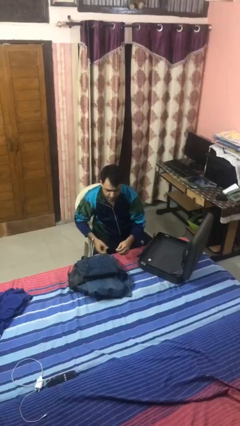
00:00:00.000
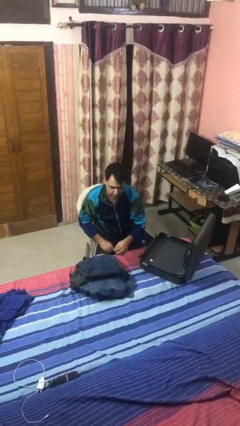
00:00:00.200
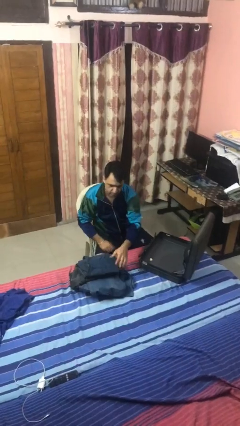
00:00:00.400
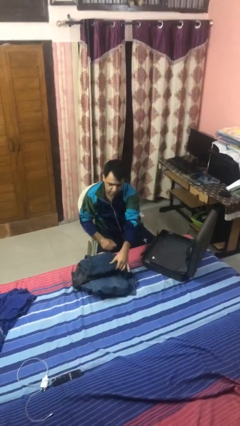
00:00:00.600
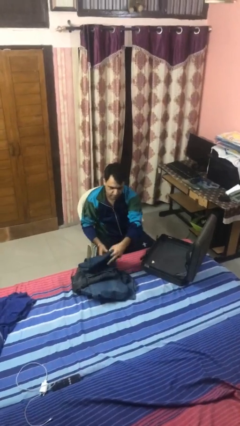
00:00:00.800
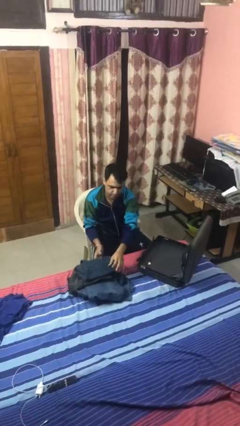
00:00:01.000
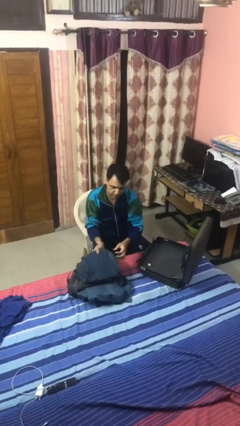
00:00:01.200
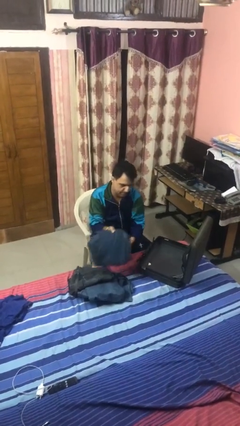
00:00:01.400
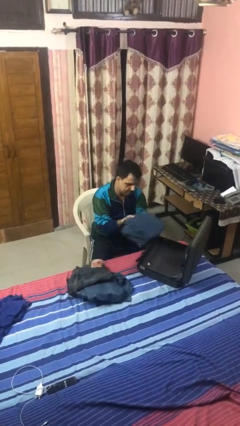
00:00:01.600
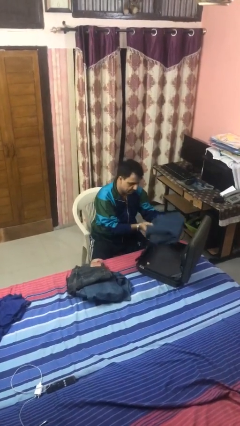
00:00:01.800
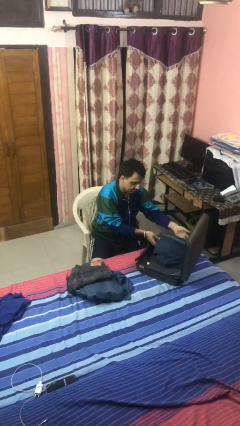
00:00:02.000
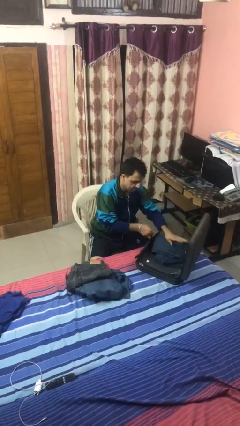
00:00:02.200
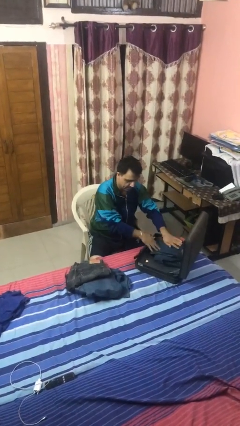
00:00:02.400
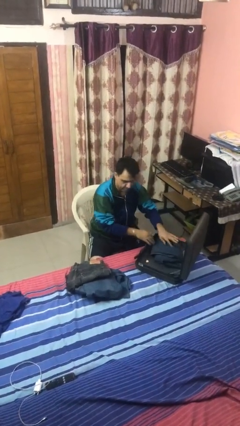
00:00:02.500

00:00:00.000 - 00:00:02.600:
person loads clothes into suitcase

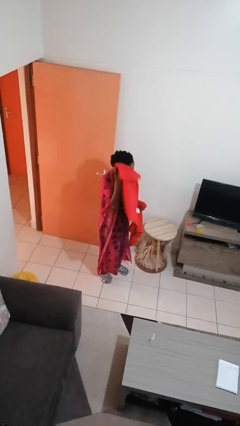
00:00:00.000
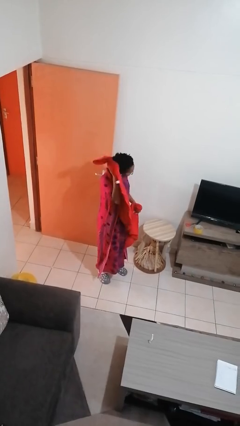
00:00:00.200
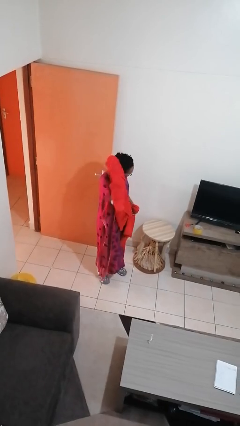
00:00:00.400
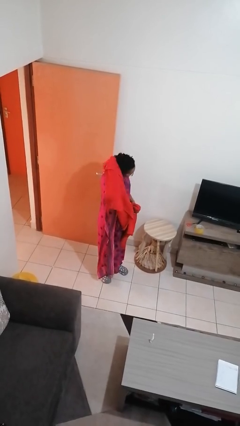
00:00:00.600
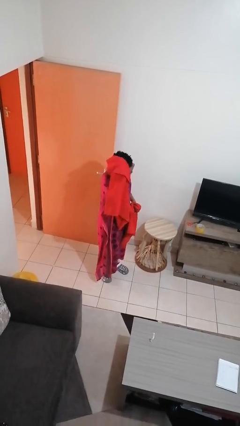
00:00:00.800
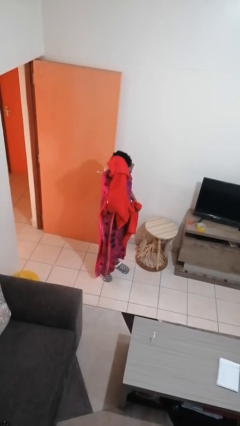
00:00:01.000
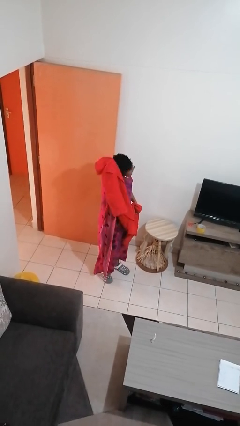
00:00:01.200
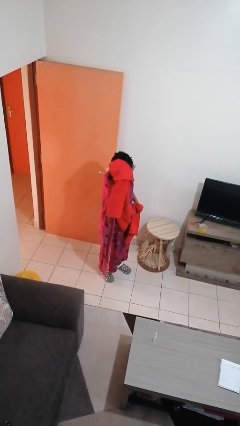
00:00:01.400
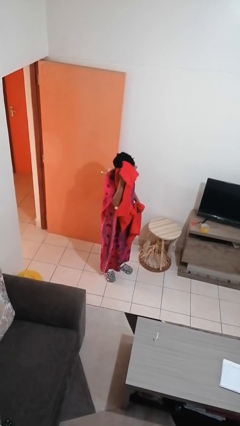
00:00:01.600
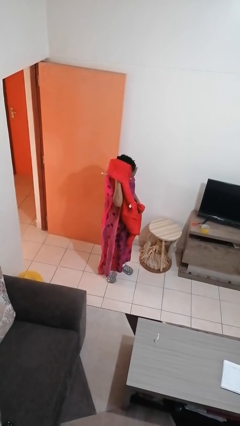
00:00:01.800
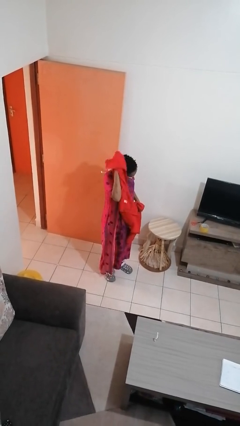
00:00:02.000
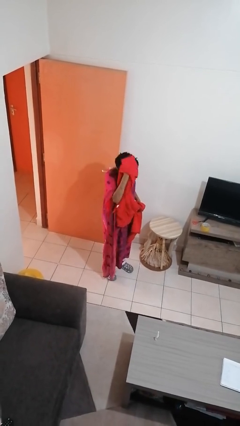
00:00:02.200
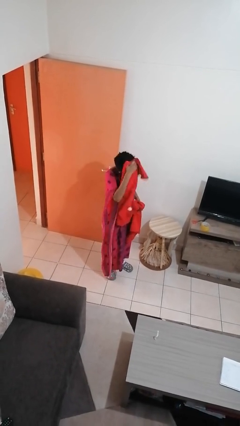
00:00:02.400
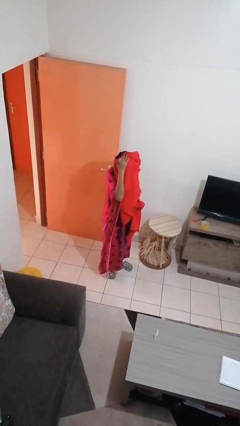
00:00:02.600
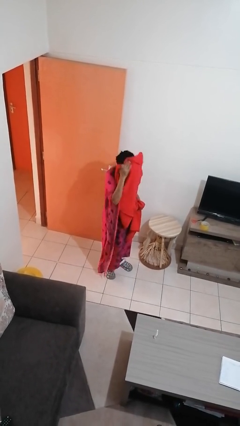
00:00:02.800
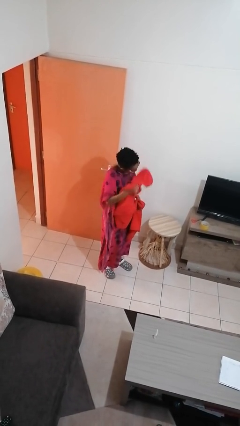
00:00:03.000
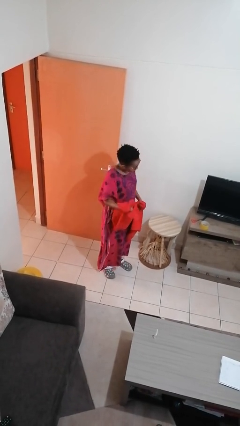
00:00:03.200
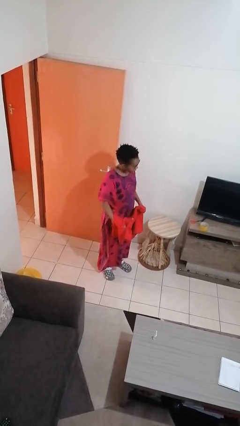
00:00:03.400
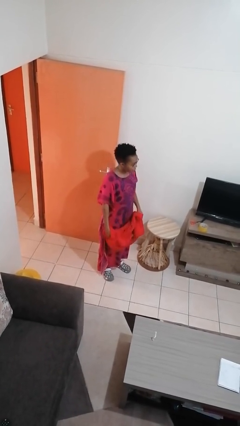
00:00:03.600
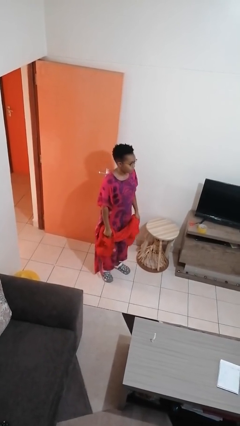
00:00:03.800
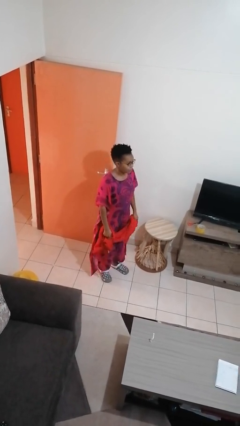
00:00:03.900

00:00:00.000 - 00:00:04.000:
person dries hair with towel

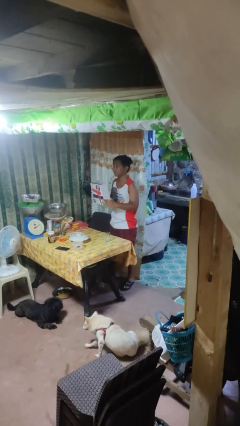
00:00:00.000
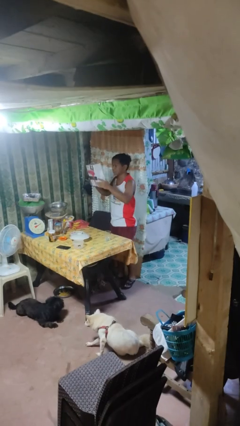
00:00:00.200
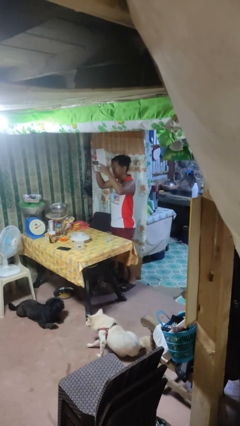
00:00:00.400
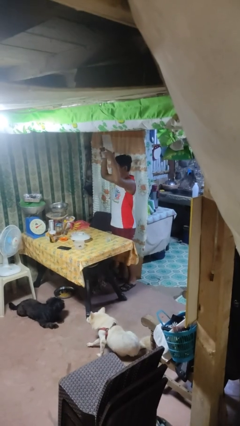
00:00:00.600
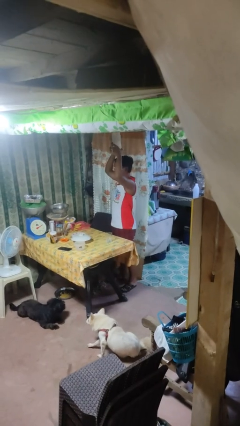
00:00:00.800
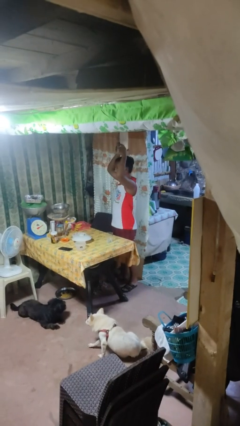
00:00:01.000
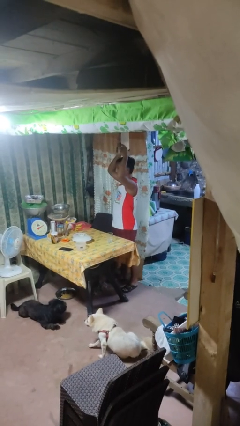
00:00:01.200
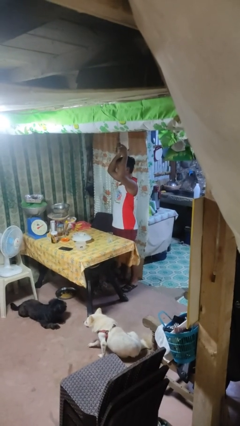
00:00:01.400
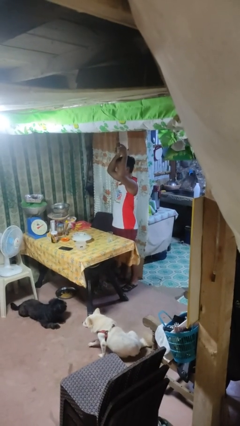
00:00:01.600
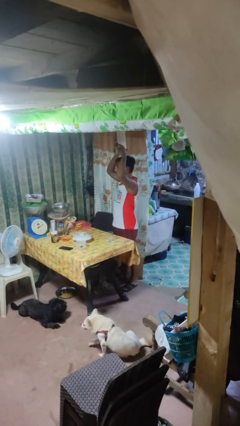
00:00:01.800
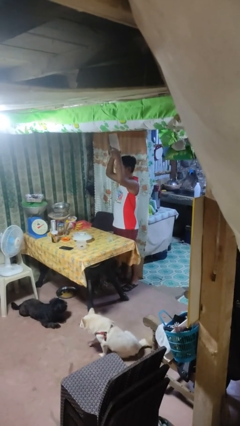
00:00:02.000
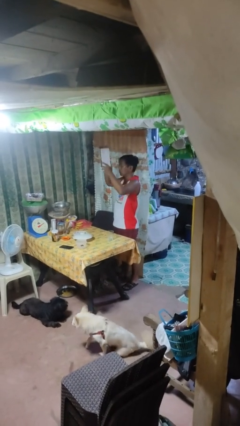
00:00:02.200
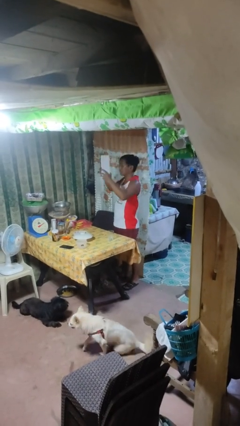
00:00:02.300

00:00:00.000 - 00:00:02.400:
person holds object above head

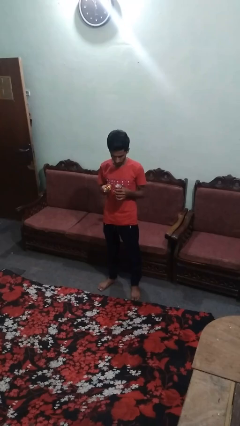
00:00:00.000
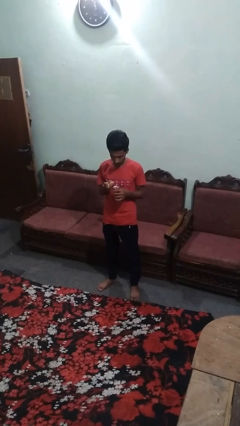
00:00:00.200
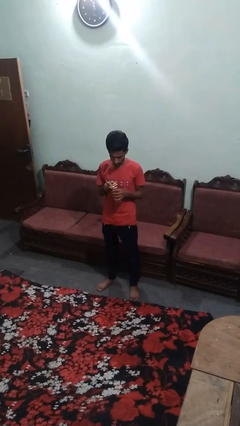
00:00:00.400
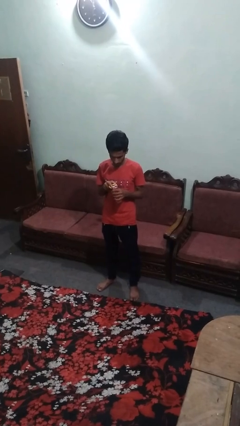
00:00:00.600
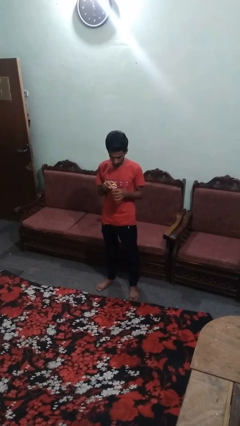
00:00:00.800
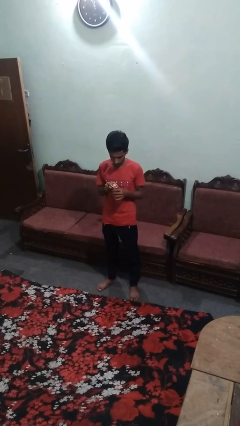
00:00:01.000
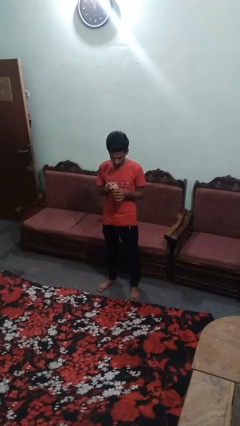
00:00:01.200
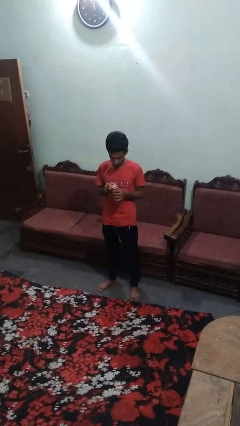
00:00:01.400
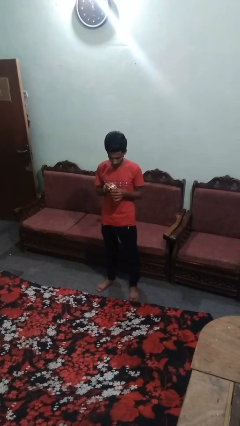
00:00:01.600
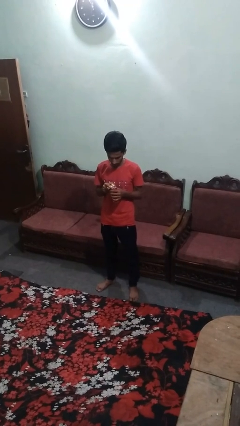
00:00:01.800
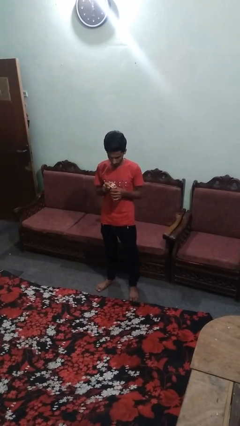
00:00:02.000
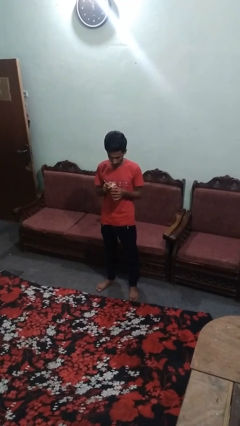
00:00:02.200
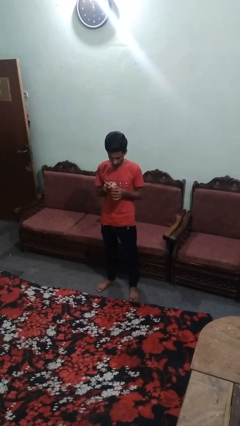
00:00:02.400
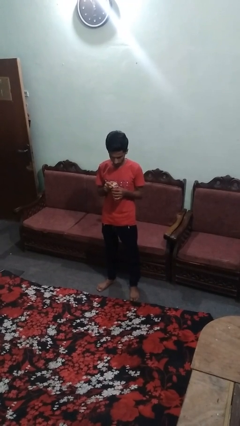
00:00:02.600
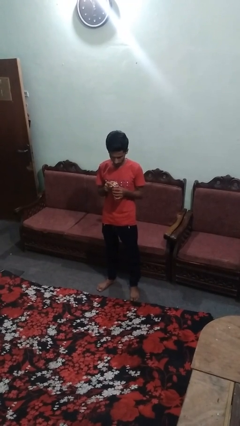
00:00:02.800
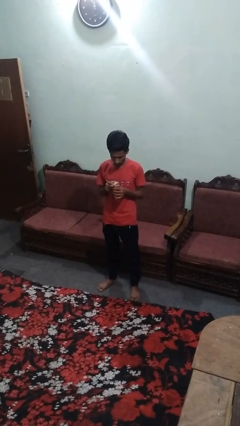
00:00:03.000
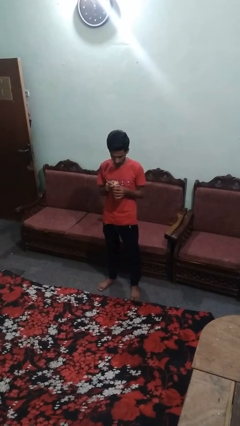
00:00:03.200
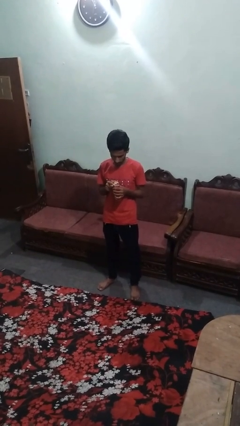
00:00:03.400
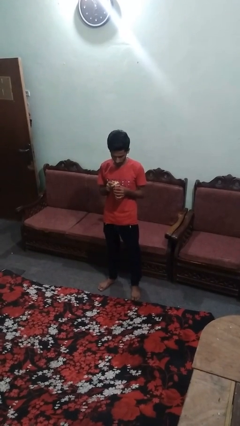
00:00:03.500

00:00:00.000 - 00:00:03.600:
person opens can with can opener

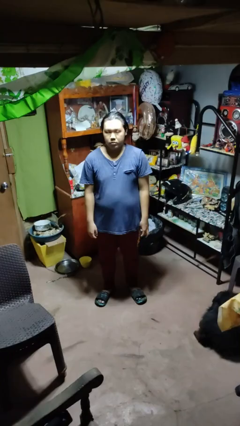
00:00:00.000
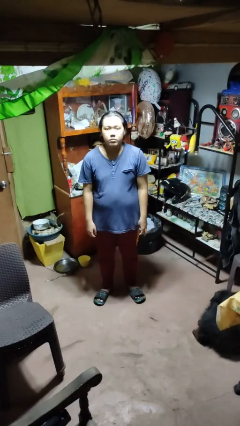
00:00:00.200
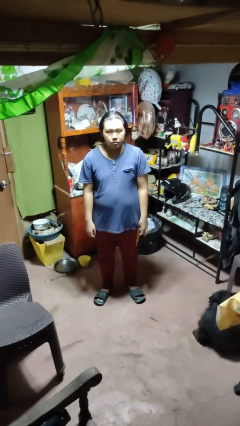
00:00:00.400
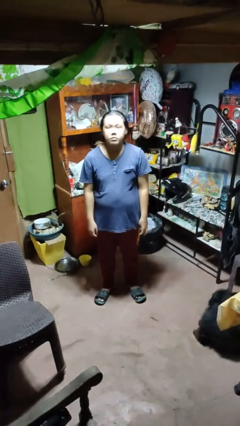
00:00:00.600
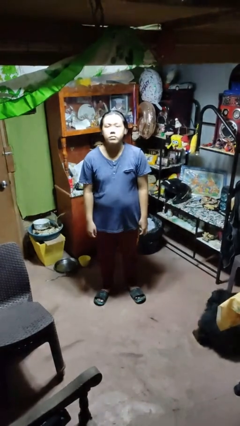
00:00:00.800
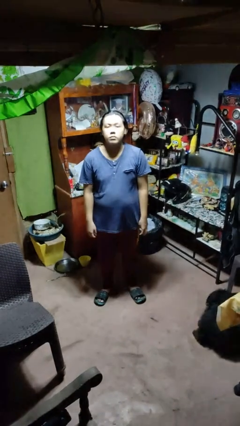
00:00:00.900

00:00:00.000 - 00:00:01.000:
person nods head

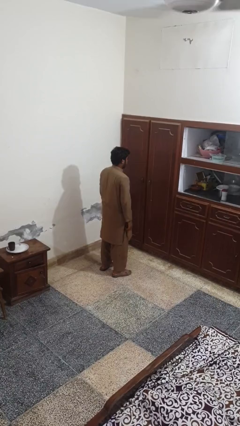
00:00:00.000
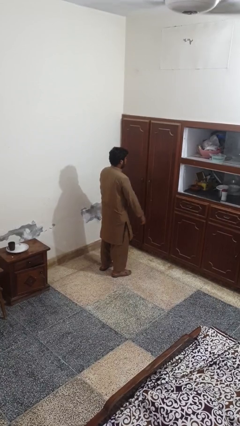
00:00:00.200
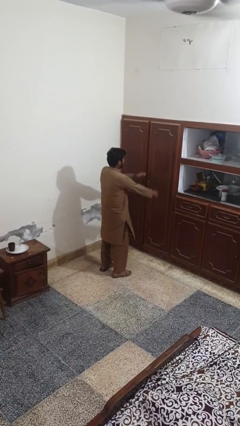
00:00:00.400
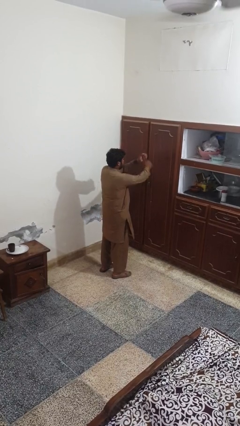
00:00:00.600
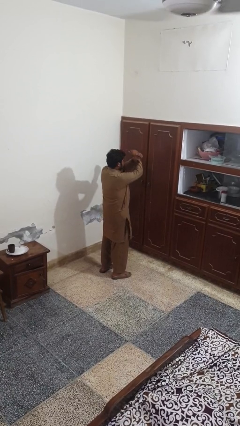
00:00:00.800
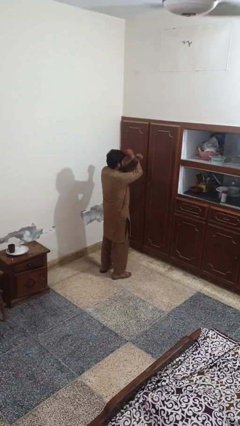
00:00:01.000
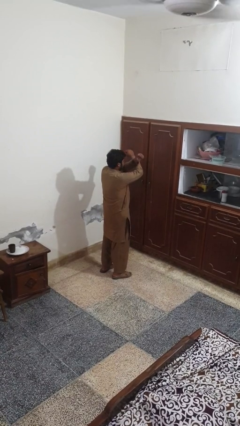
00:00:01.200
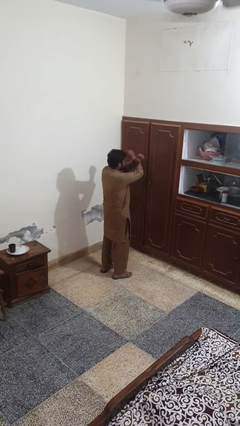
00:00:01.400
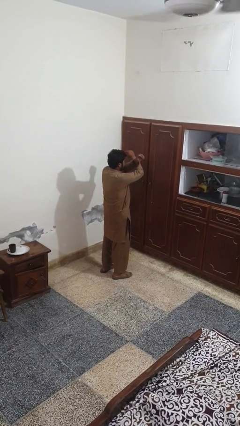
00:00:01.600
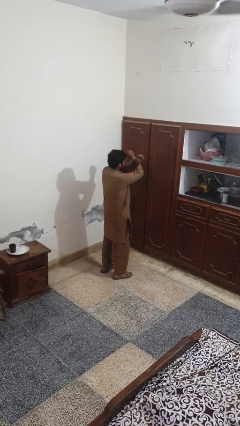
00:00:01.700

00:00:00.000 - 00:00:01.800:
person gestures arms x

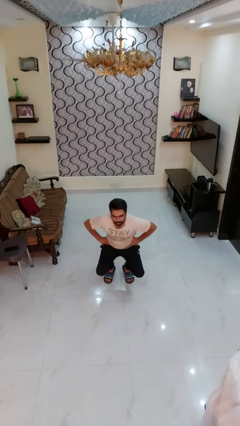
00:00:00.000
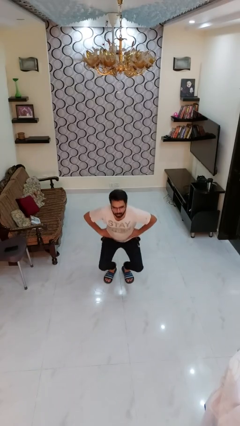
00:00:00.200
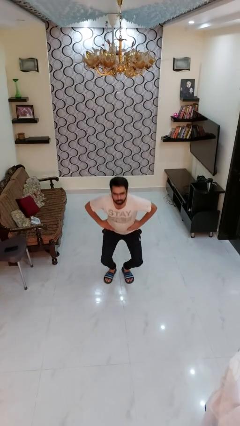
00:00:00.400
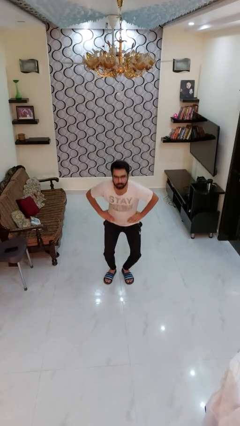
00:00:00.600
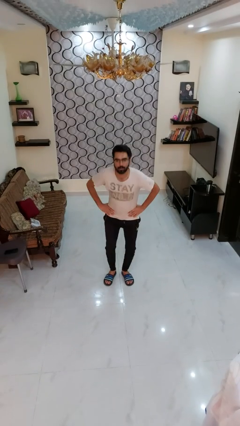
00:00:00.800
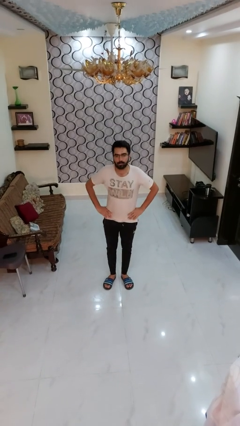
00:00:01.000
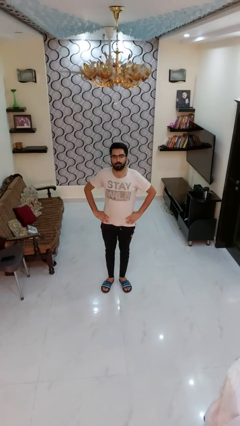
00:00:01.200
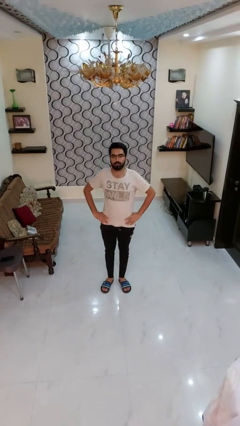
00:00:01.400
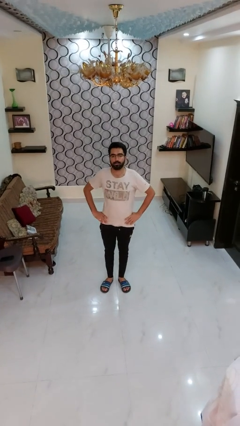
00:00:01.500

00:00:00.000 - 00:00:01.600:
person stands up
